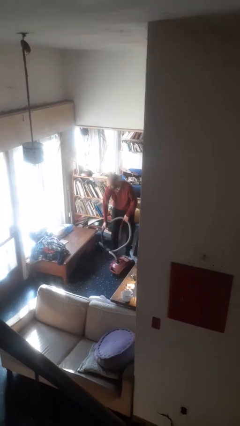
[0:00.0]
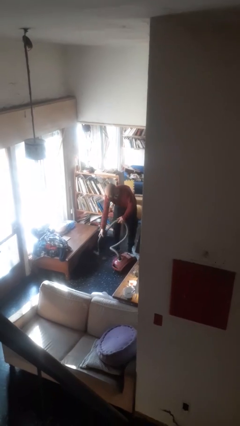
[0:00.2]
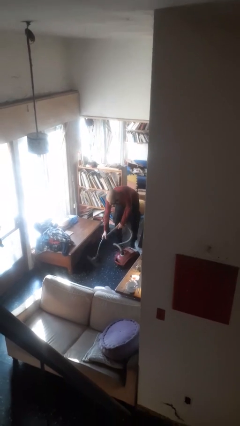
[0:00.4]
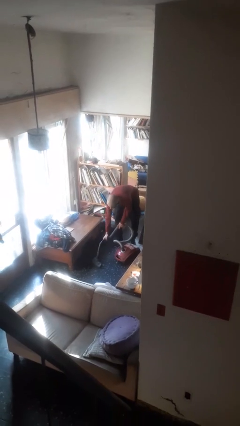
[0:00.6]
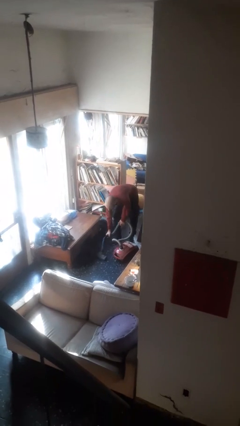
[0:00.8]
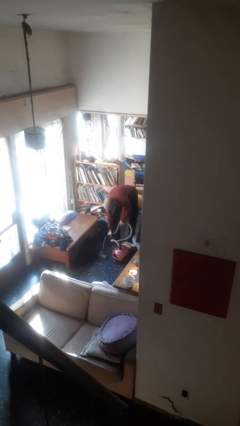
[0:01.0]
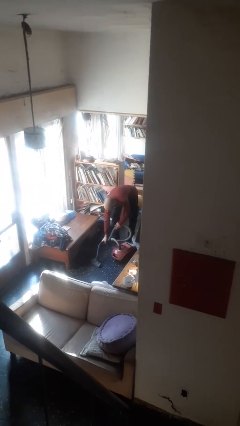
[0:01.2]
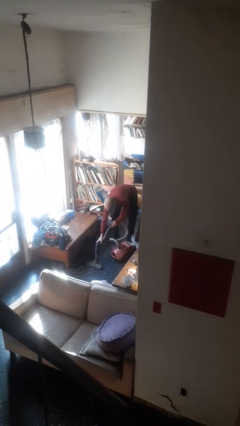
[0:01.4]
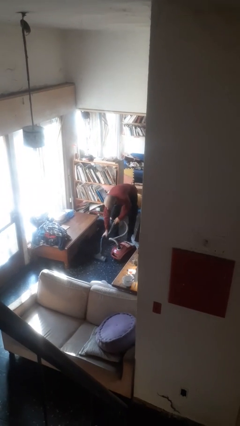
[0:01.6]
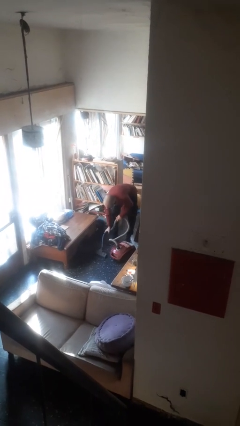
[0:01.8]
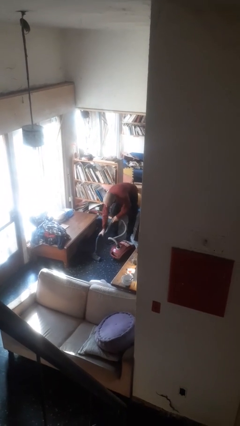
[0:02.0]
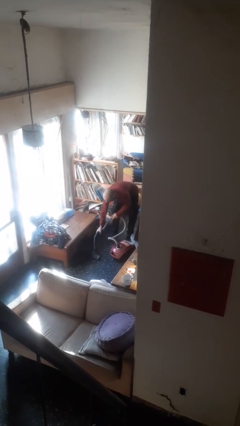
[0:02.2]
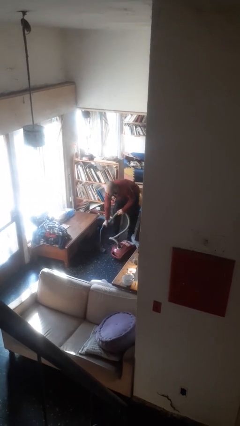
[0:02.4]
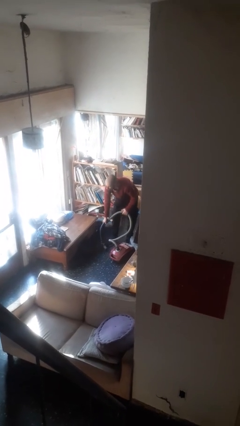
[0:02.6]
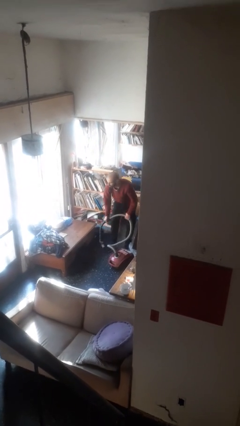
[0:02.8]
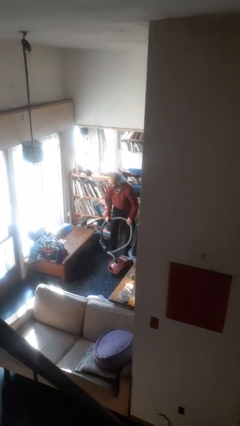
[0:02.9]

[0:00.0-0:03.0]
person vacuums carpet

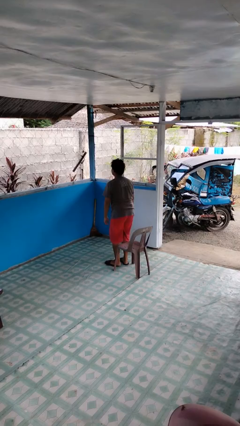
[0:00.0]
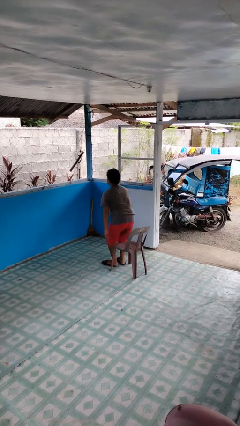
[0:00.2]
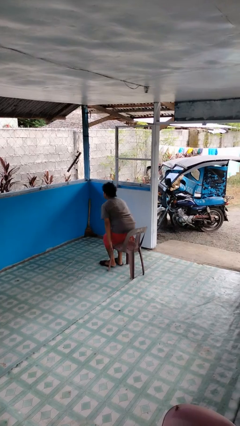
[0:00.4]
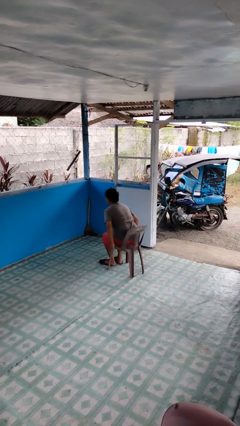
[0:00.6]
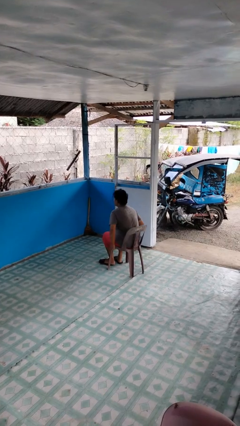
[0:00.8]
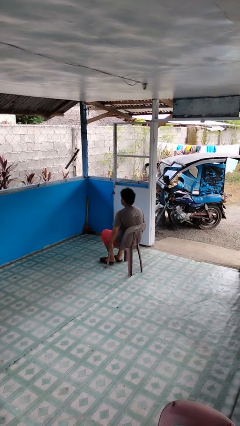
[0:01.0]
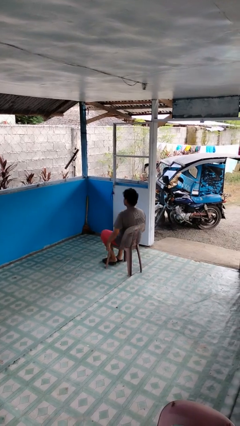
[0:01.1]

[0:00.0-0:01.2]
person sits down

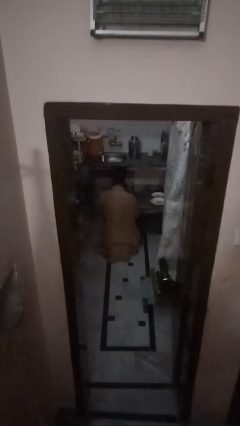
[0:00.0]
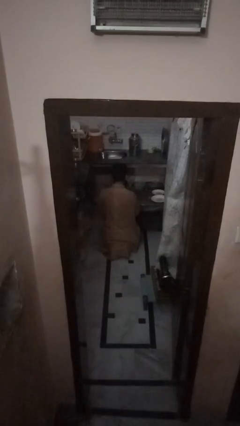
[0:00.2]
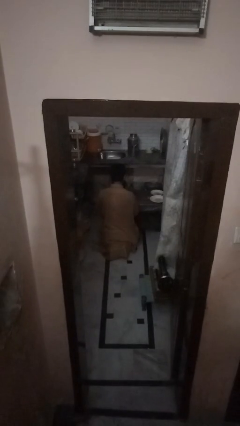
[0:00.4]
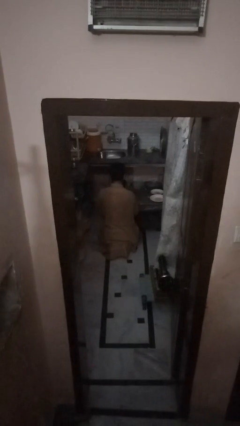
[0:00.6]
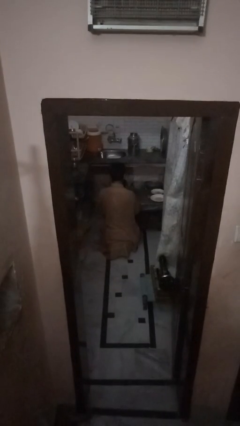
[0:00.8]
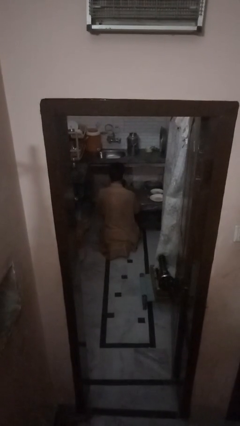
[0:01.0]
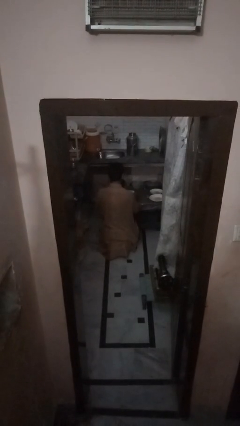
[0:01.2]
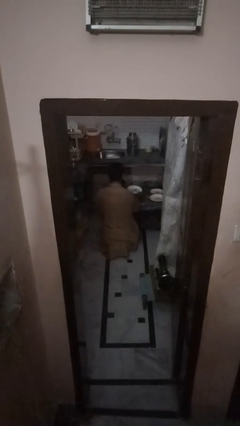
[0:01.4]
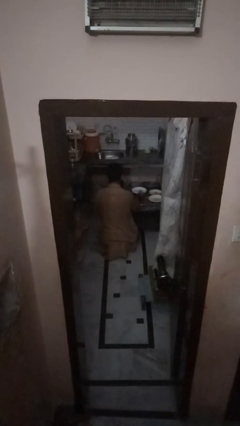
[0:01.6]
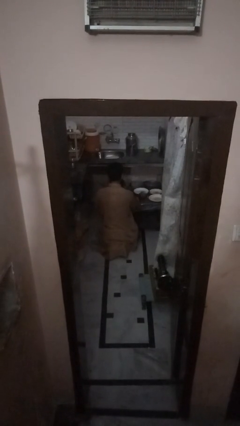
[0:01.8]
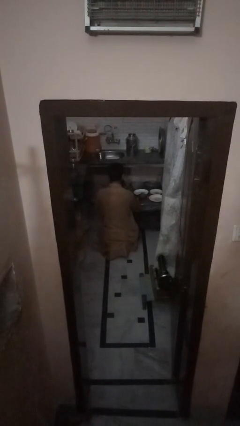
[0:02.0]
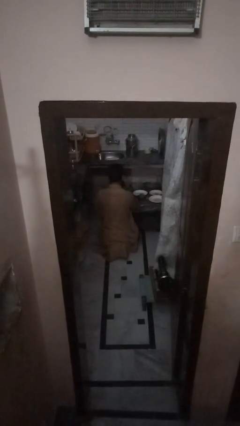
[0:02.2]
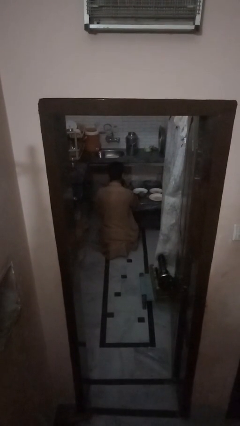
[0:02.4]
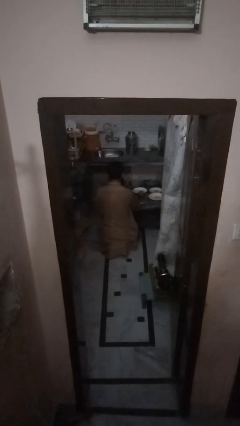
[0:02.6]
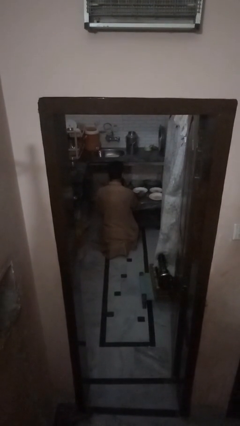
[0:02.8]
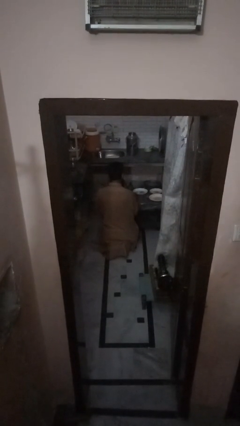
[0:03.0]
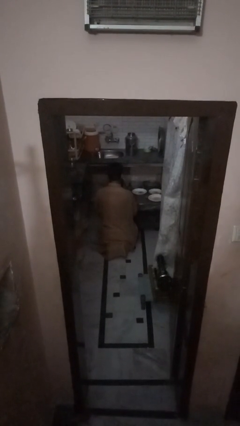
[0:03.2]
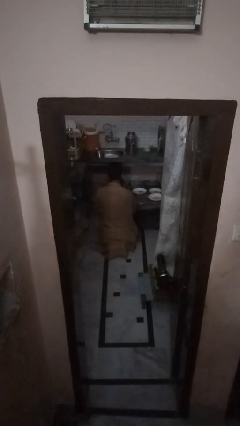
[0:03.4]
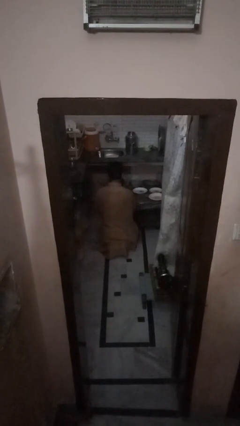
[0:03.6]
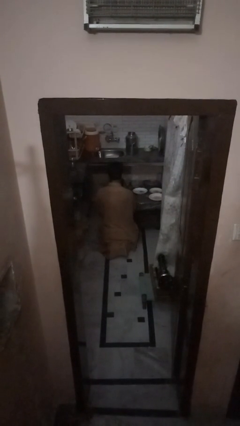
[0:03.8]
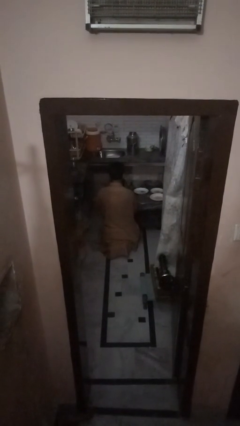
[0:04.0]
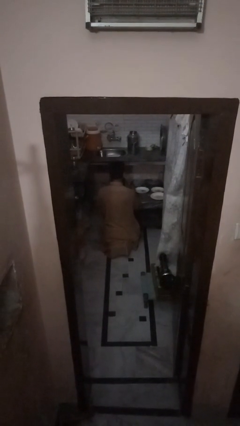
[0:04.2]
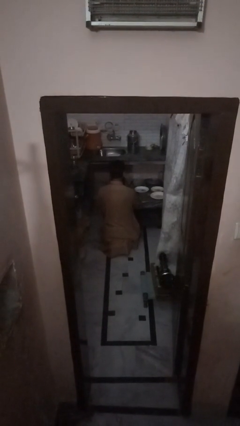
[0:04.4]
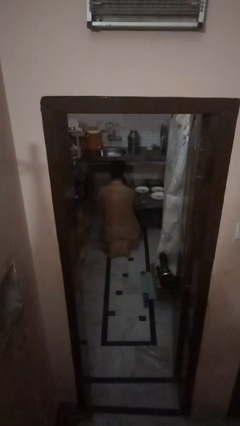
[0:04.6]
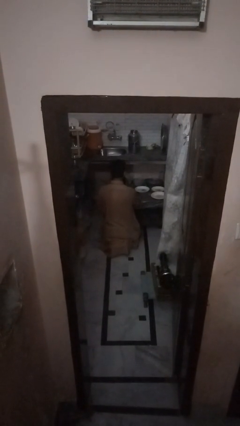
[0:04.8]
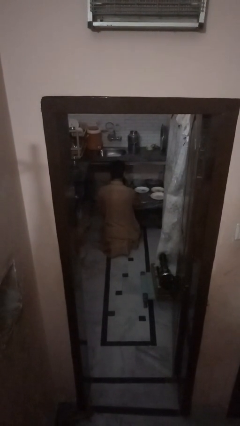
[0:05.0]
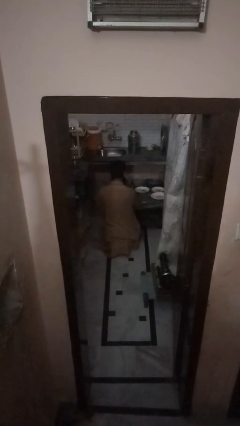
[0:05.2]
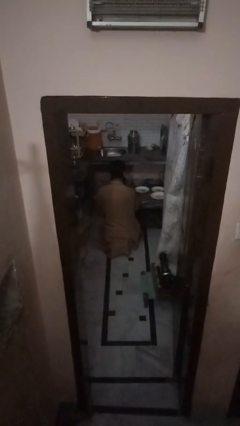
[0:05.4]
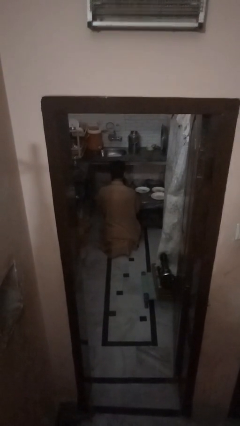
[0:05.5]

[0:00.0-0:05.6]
person sets table

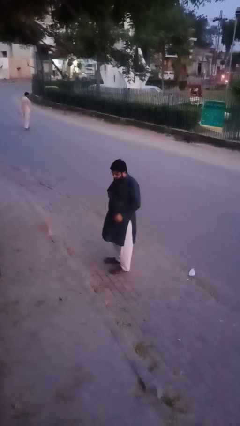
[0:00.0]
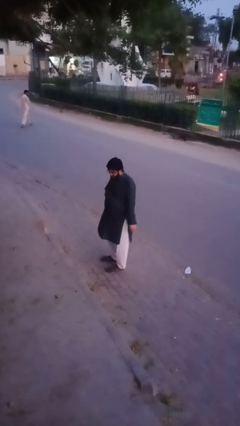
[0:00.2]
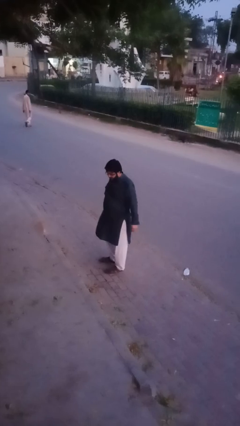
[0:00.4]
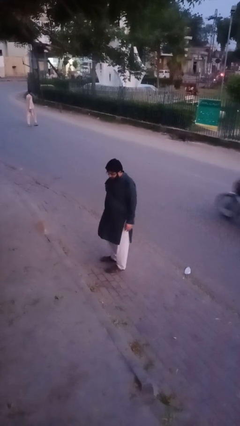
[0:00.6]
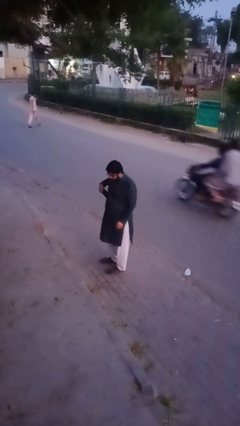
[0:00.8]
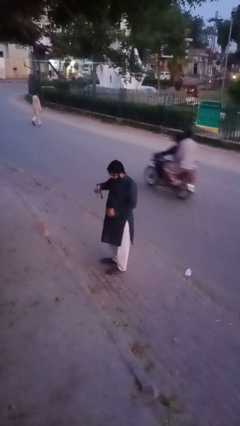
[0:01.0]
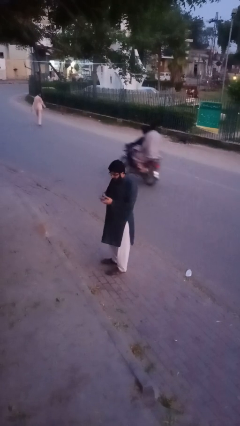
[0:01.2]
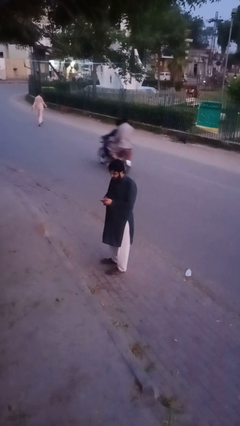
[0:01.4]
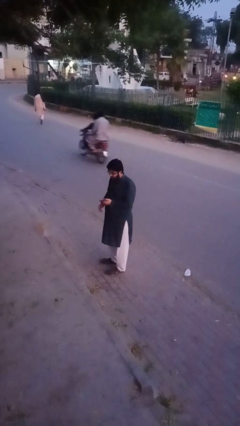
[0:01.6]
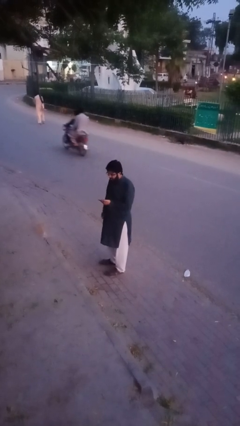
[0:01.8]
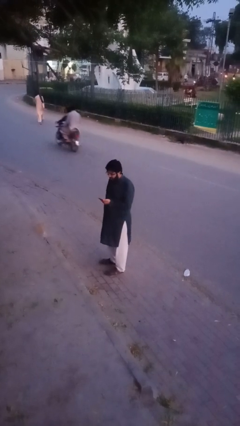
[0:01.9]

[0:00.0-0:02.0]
person takes phone from pocket

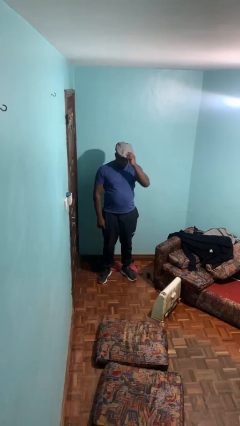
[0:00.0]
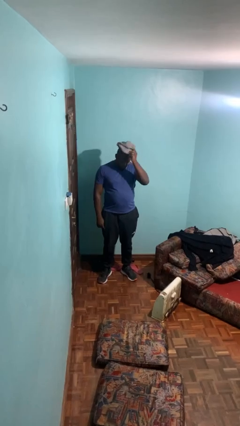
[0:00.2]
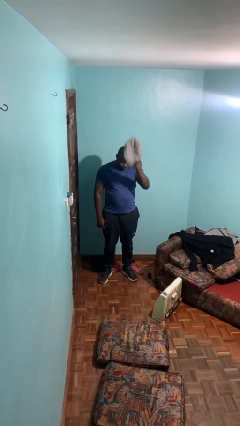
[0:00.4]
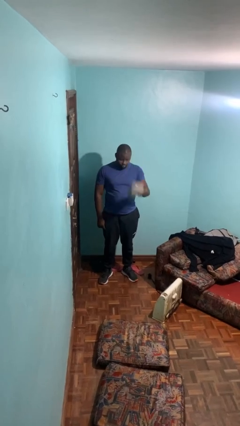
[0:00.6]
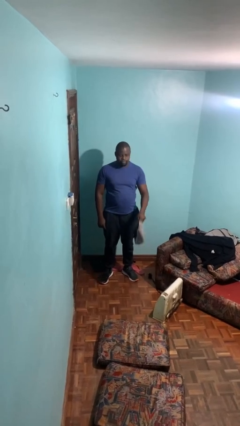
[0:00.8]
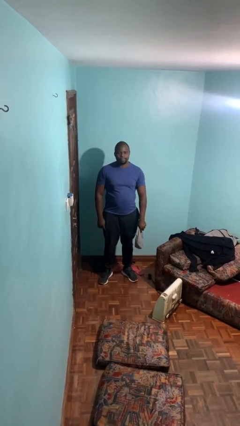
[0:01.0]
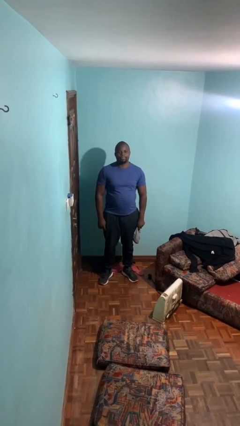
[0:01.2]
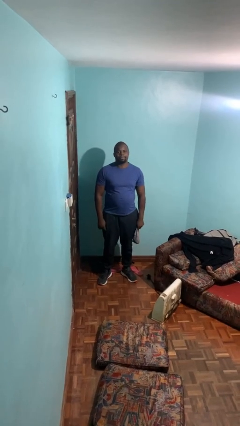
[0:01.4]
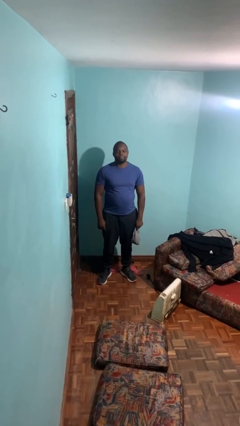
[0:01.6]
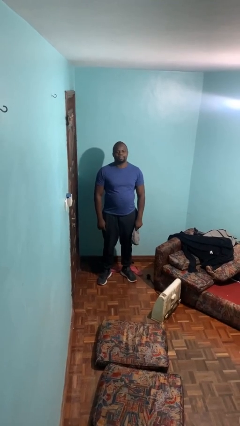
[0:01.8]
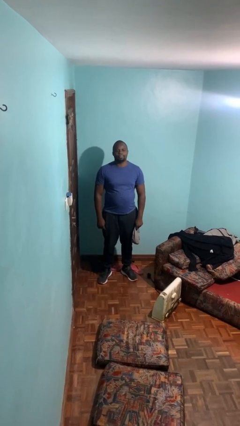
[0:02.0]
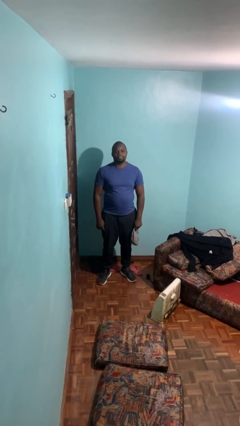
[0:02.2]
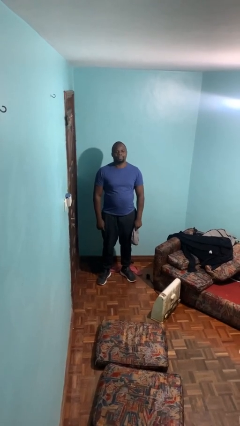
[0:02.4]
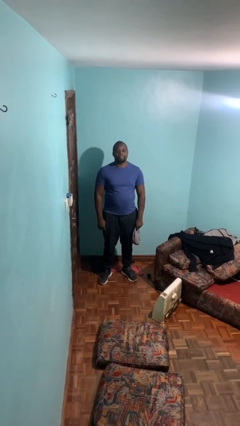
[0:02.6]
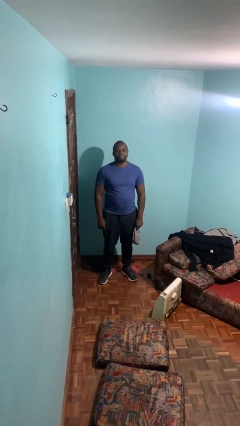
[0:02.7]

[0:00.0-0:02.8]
person takes off hat

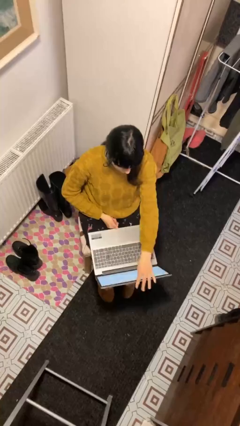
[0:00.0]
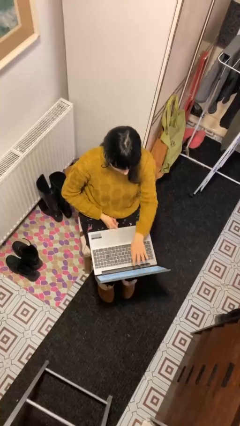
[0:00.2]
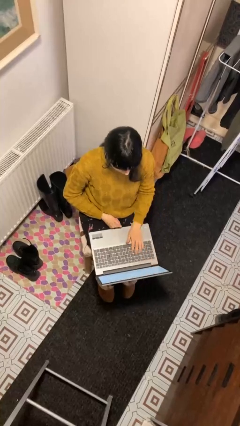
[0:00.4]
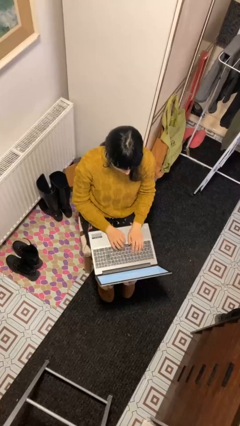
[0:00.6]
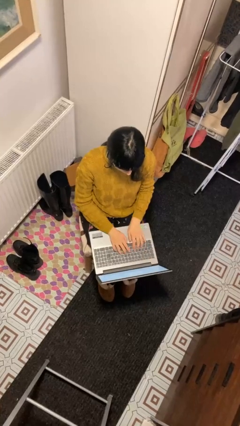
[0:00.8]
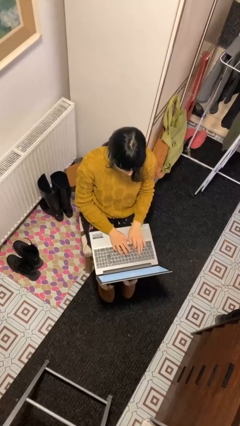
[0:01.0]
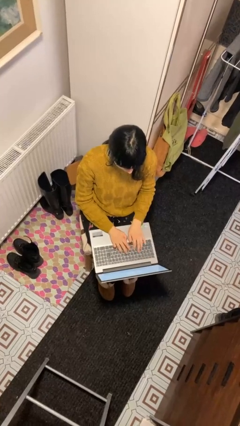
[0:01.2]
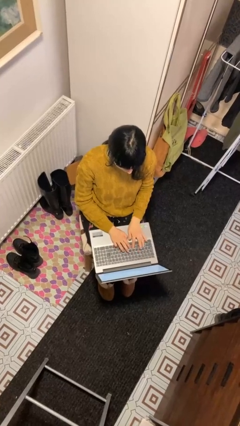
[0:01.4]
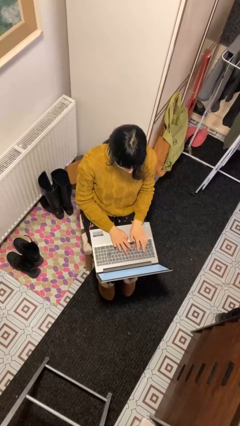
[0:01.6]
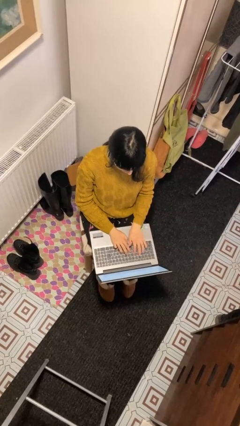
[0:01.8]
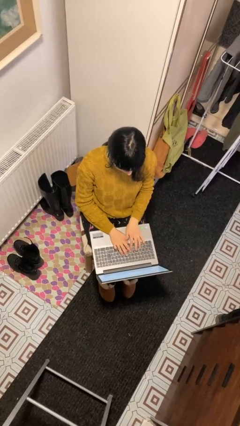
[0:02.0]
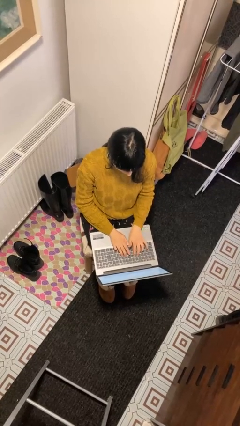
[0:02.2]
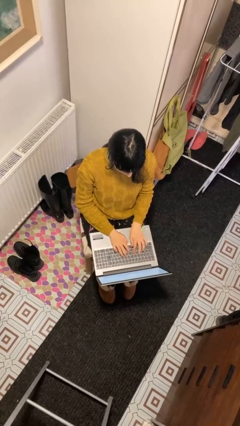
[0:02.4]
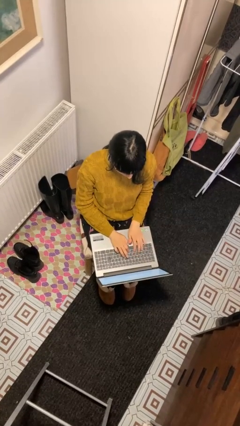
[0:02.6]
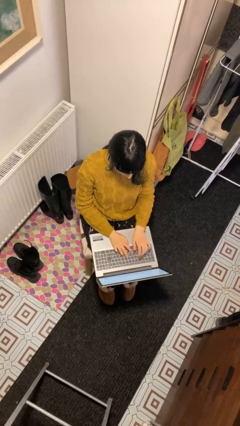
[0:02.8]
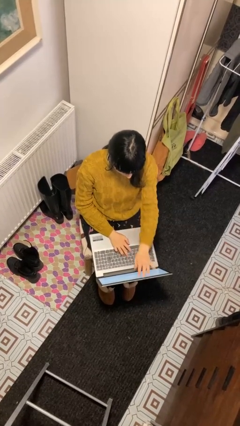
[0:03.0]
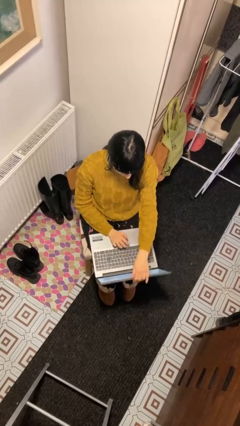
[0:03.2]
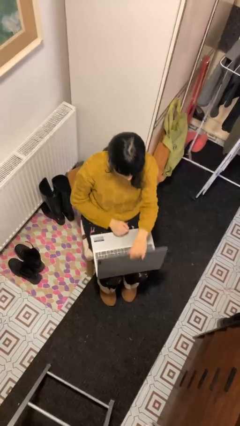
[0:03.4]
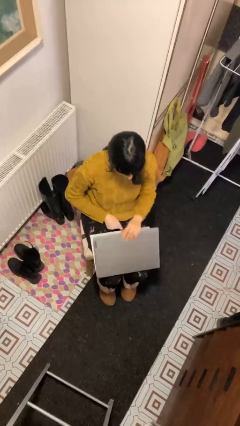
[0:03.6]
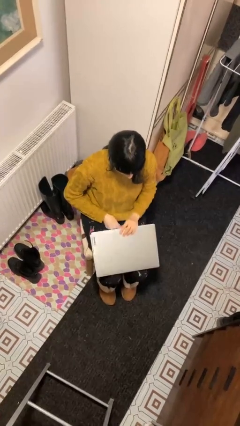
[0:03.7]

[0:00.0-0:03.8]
person interacts with laptop
